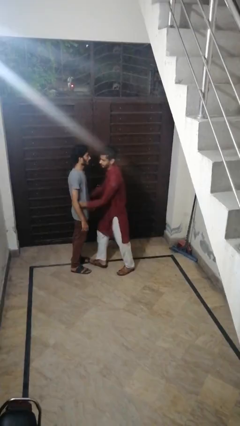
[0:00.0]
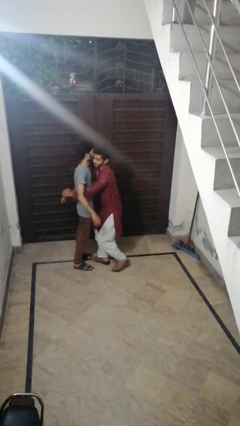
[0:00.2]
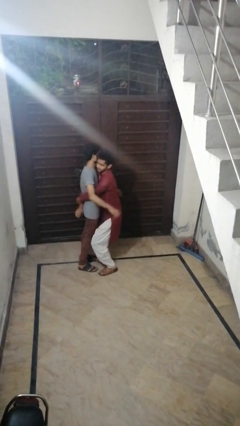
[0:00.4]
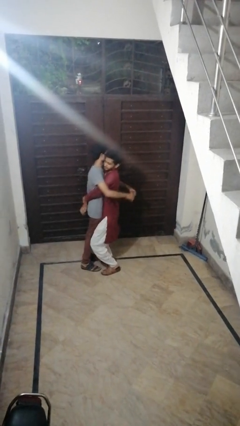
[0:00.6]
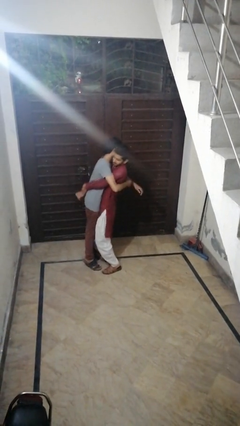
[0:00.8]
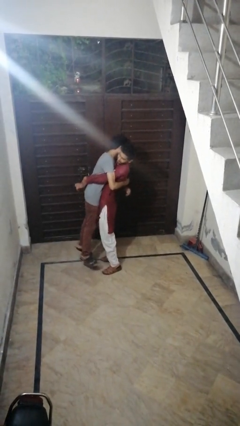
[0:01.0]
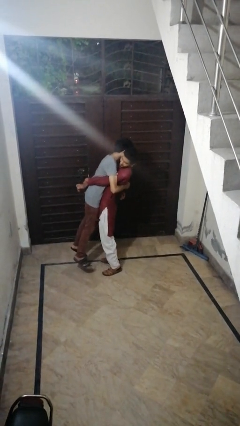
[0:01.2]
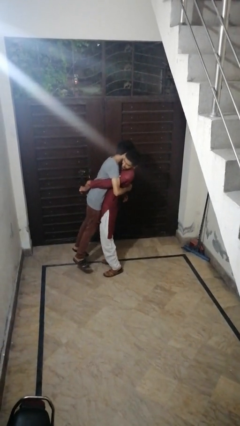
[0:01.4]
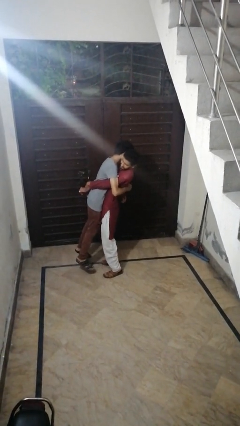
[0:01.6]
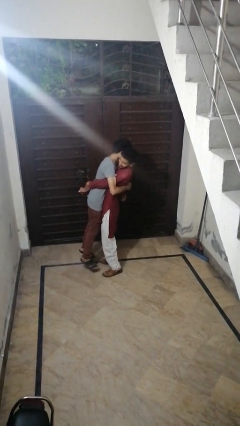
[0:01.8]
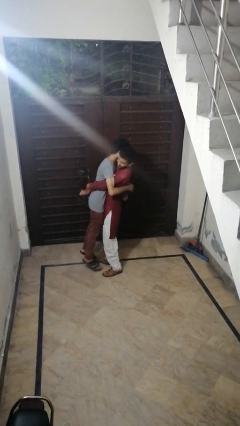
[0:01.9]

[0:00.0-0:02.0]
person picks up person

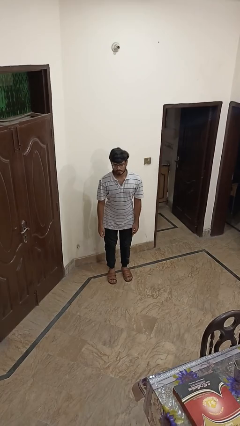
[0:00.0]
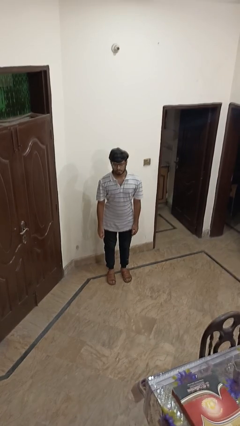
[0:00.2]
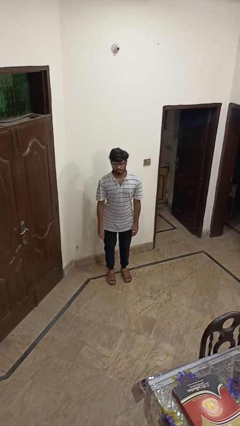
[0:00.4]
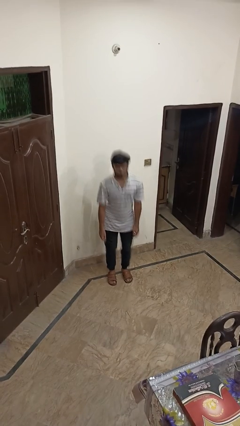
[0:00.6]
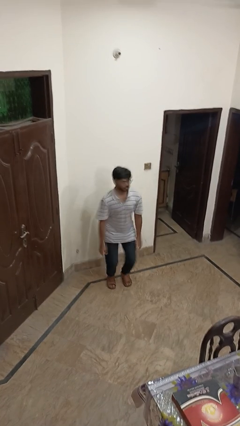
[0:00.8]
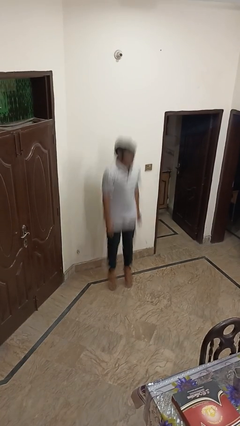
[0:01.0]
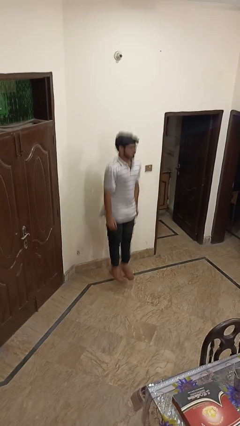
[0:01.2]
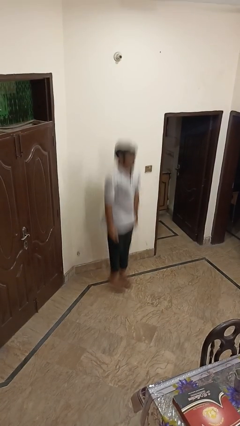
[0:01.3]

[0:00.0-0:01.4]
person jumps

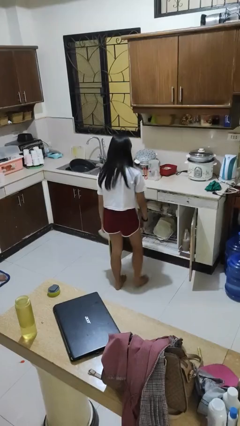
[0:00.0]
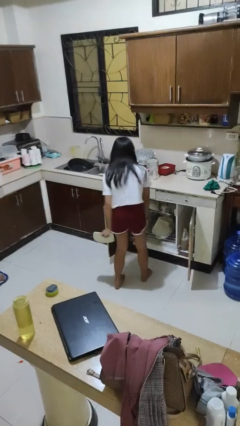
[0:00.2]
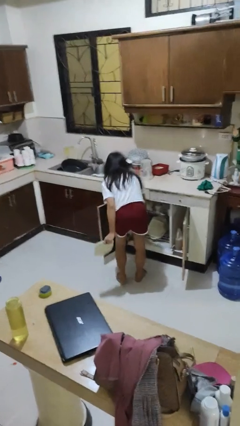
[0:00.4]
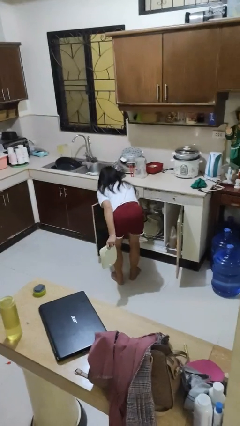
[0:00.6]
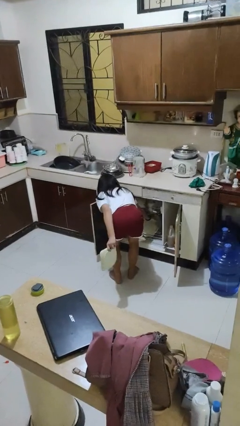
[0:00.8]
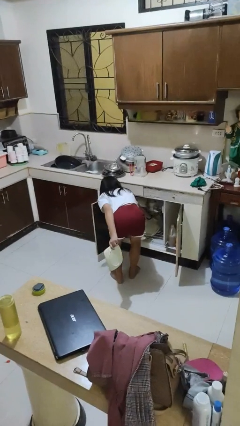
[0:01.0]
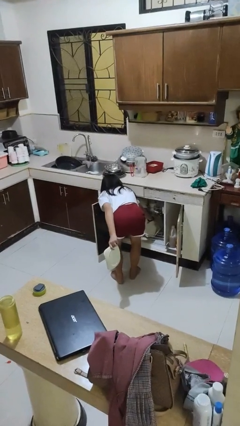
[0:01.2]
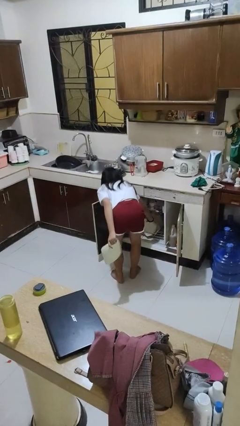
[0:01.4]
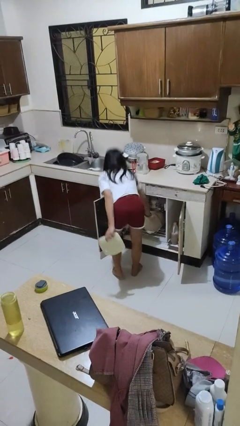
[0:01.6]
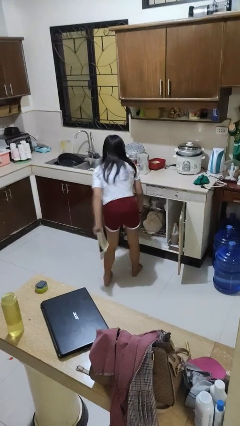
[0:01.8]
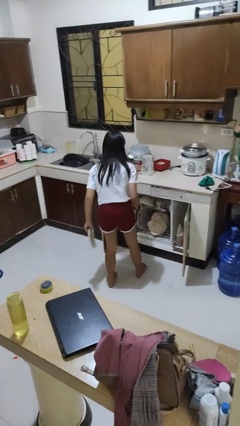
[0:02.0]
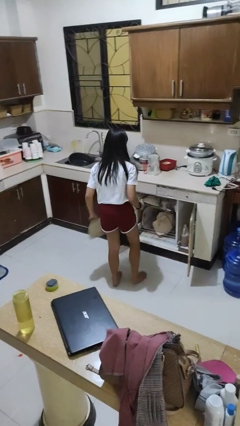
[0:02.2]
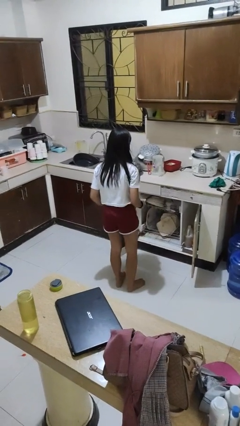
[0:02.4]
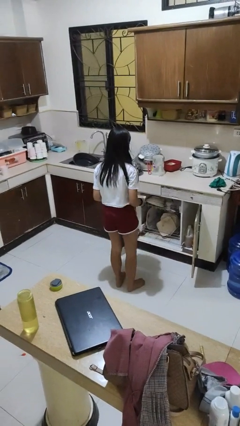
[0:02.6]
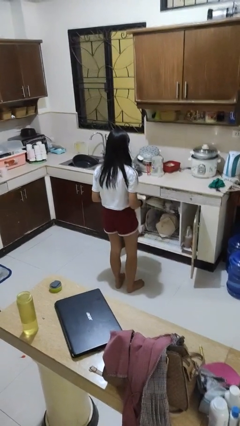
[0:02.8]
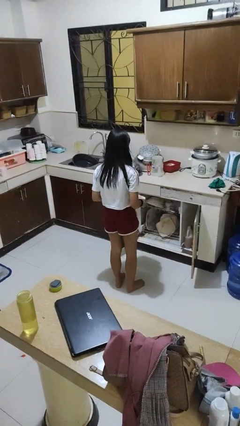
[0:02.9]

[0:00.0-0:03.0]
person unloads dishwasher

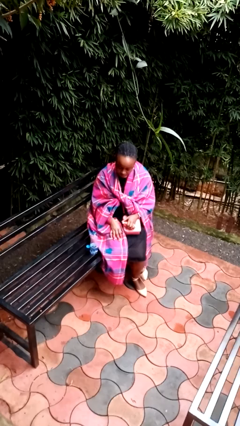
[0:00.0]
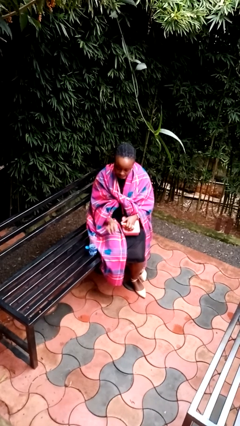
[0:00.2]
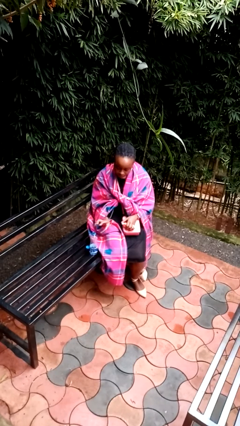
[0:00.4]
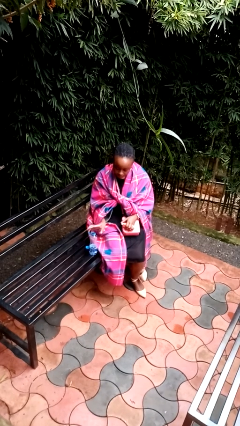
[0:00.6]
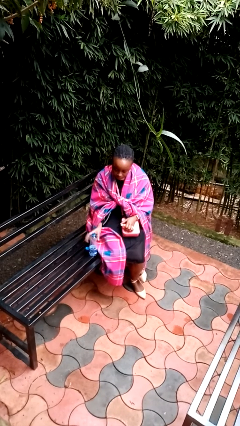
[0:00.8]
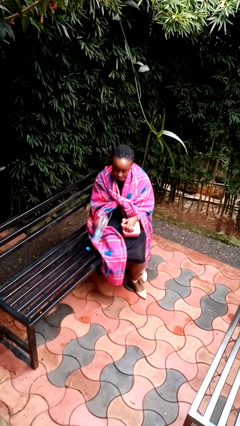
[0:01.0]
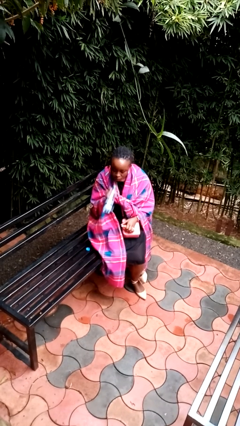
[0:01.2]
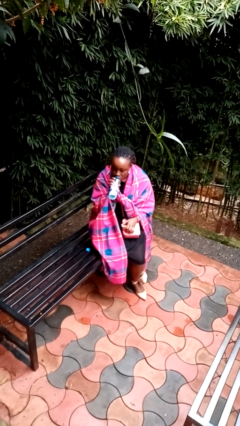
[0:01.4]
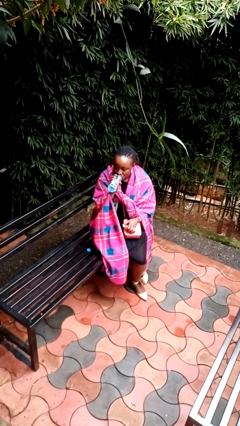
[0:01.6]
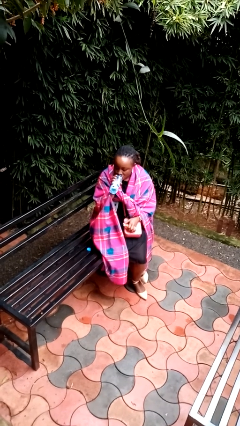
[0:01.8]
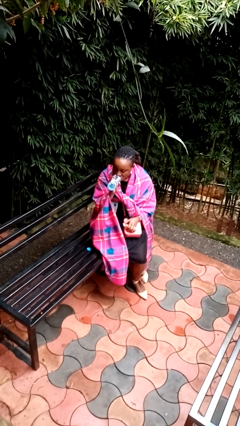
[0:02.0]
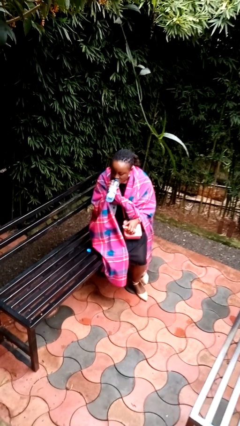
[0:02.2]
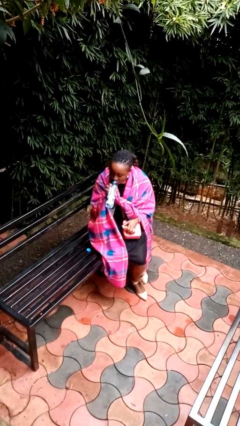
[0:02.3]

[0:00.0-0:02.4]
person drinks from cup

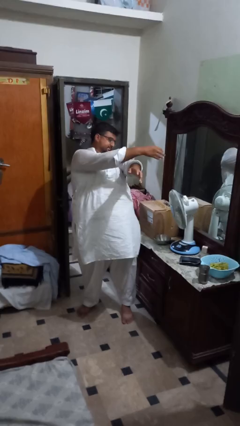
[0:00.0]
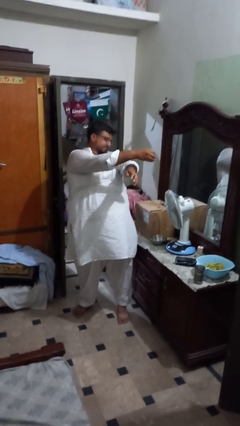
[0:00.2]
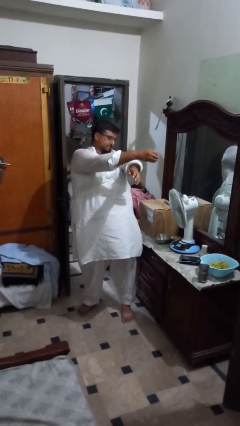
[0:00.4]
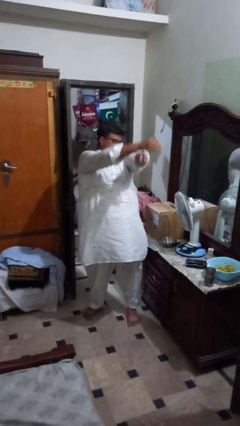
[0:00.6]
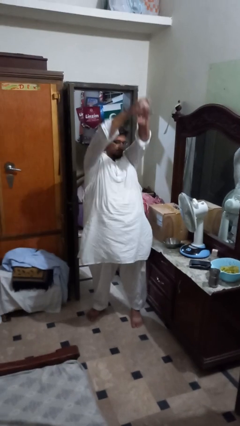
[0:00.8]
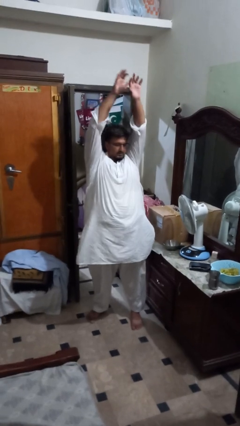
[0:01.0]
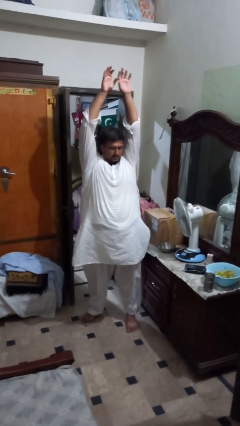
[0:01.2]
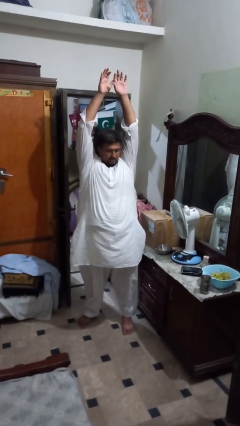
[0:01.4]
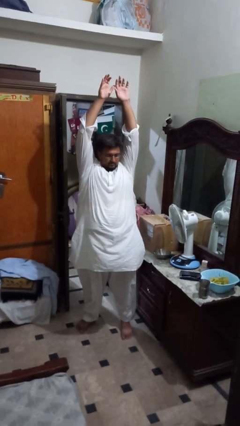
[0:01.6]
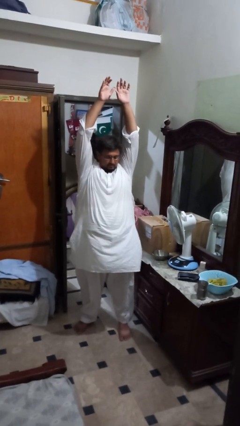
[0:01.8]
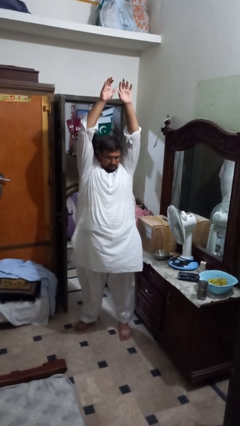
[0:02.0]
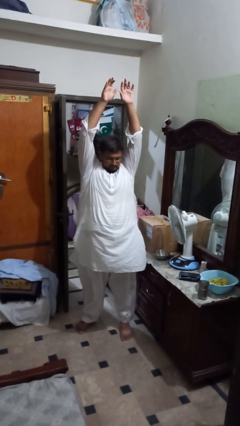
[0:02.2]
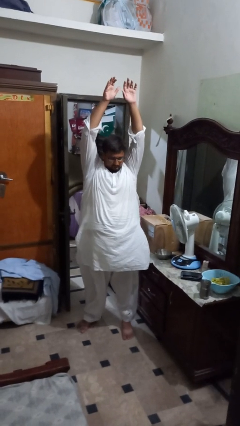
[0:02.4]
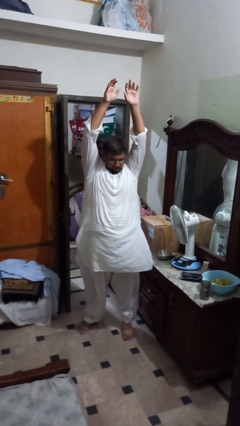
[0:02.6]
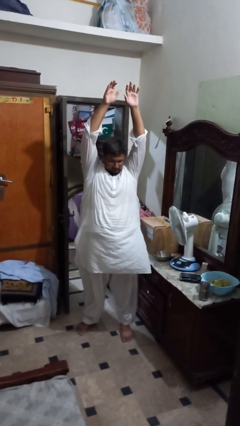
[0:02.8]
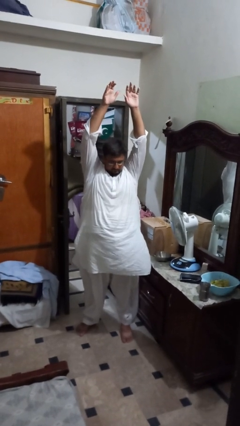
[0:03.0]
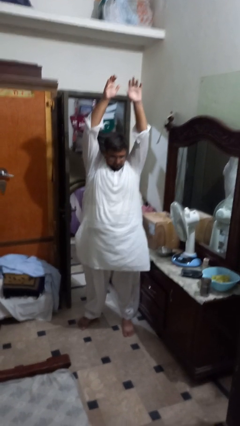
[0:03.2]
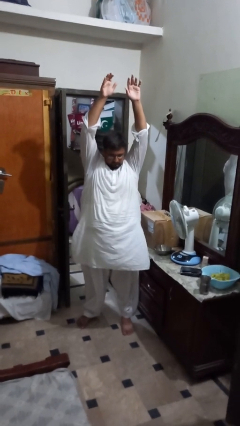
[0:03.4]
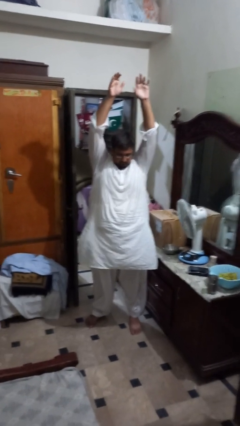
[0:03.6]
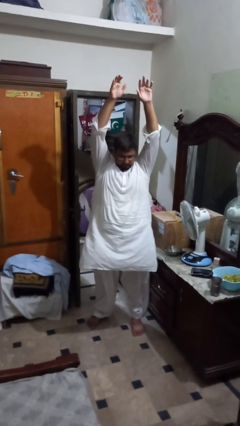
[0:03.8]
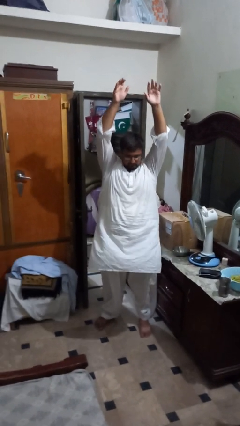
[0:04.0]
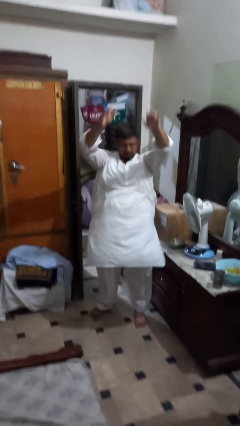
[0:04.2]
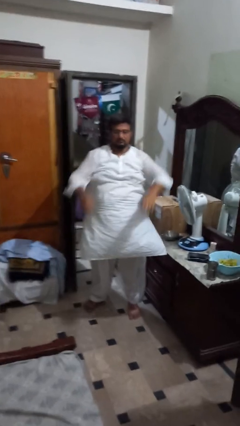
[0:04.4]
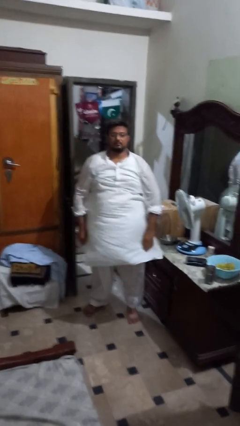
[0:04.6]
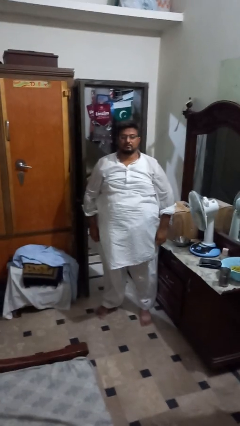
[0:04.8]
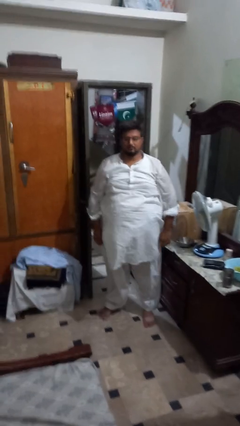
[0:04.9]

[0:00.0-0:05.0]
person stretches arms over head

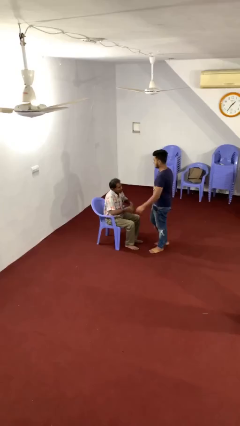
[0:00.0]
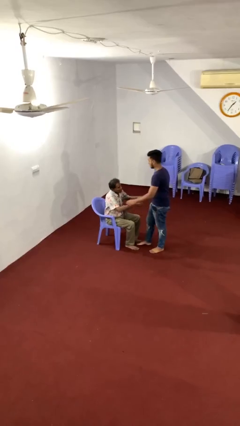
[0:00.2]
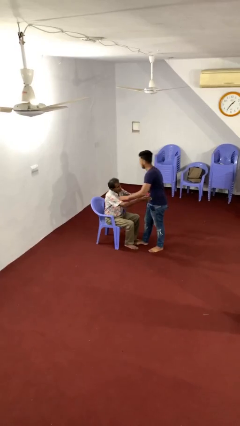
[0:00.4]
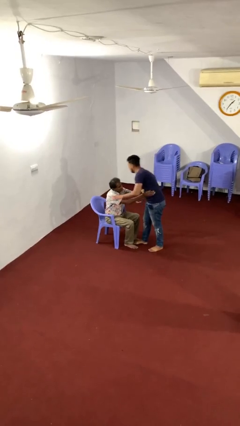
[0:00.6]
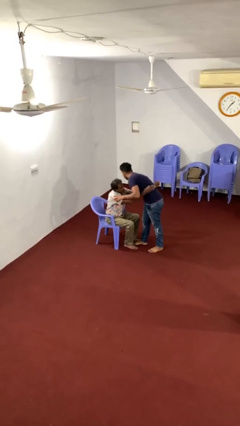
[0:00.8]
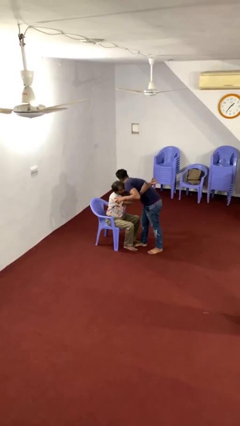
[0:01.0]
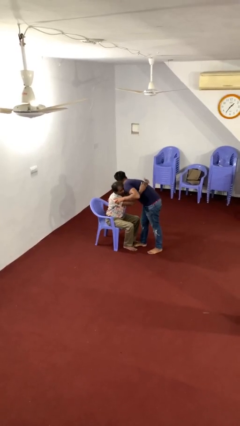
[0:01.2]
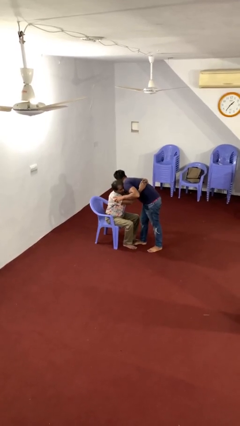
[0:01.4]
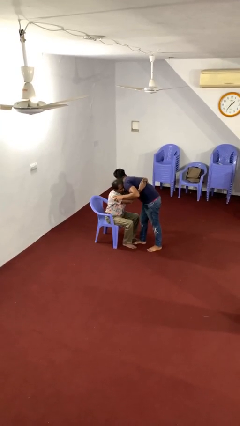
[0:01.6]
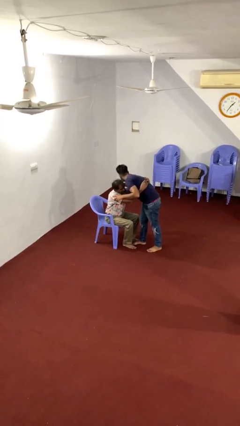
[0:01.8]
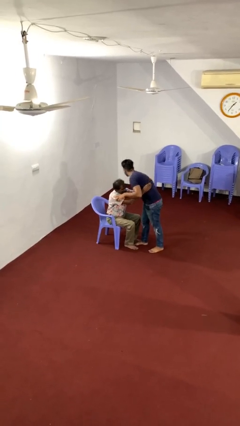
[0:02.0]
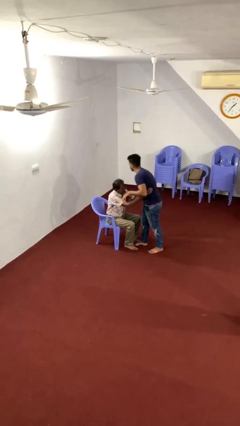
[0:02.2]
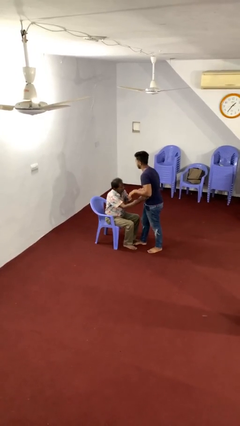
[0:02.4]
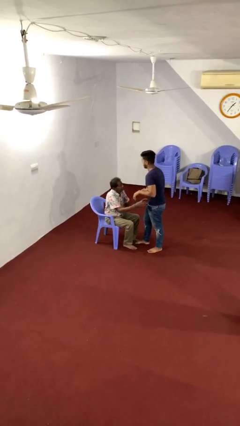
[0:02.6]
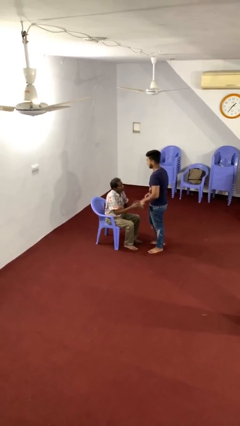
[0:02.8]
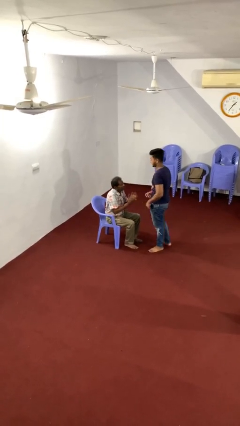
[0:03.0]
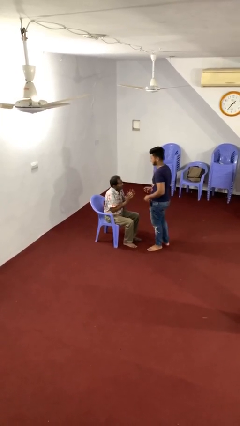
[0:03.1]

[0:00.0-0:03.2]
person embraces person

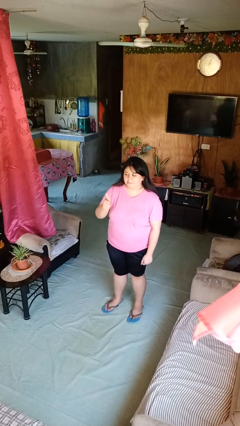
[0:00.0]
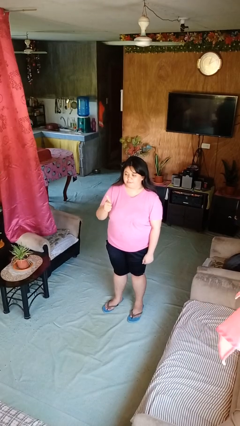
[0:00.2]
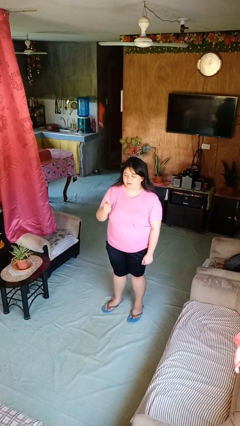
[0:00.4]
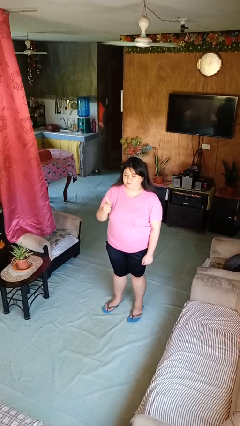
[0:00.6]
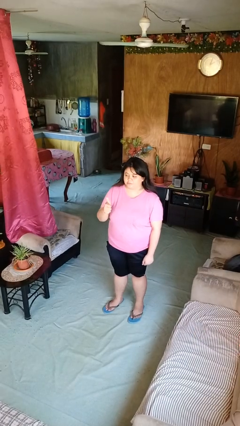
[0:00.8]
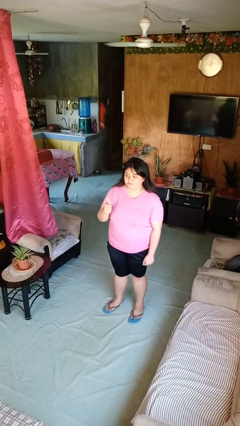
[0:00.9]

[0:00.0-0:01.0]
person gestures thumbs up
